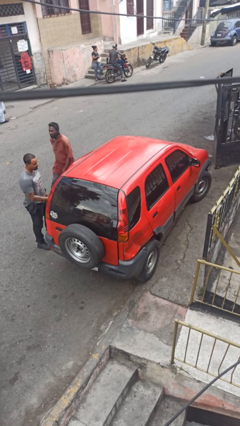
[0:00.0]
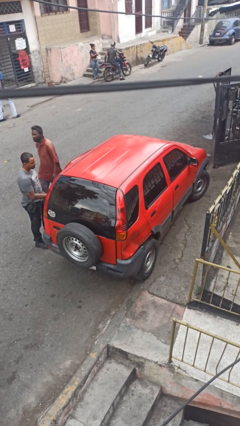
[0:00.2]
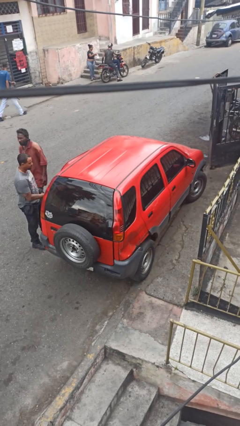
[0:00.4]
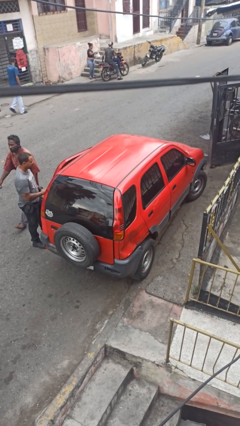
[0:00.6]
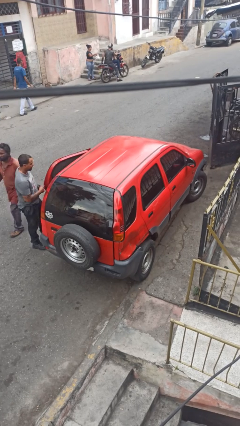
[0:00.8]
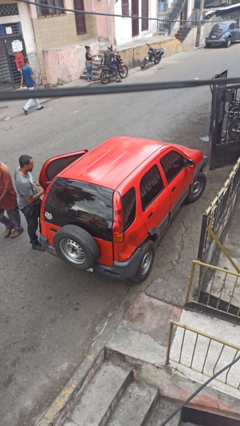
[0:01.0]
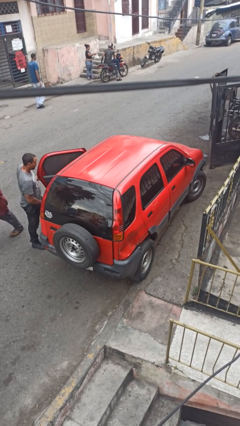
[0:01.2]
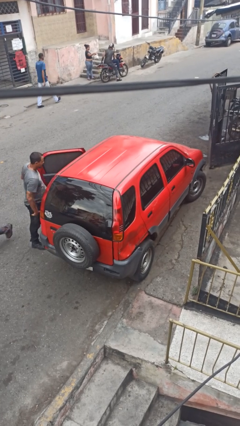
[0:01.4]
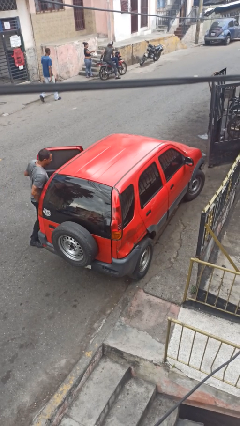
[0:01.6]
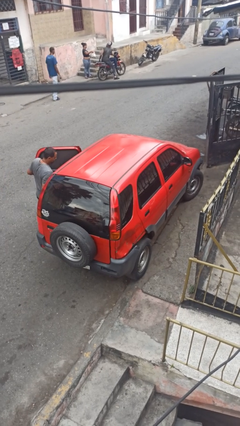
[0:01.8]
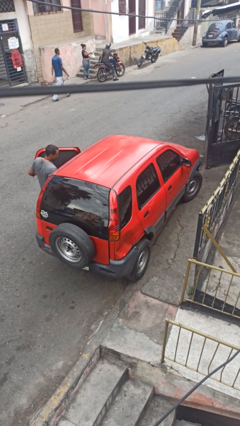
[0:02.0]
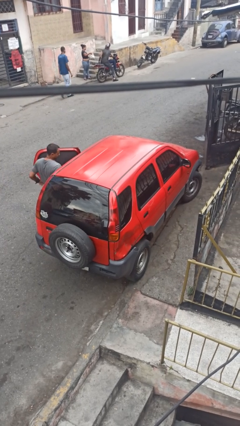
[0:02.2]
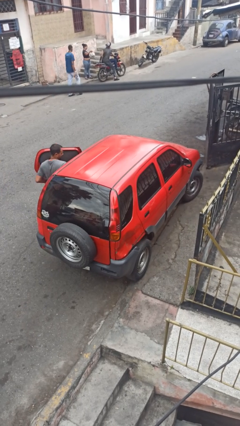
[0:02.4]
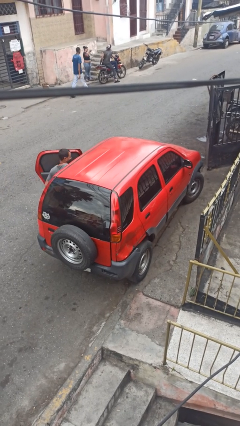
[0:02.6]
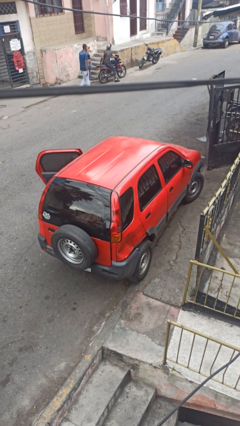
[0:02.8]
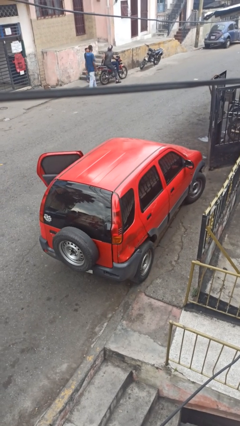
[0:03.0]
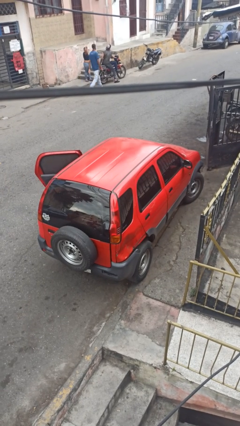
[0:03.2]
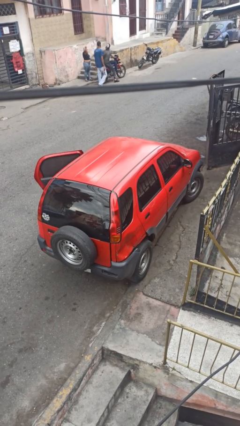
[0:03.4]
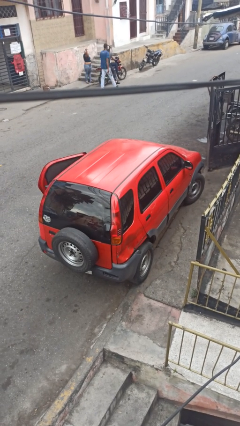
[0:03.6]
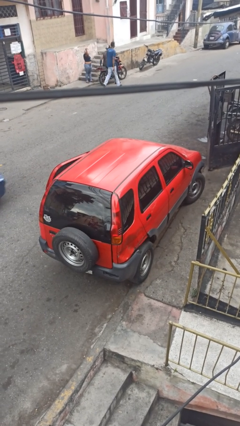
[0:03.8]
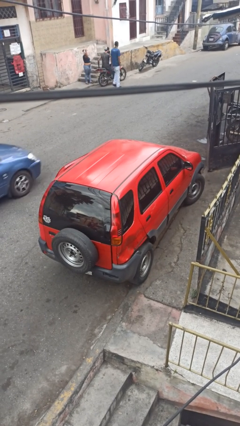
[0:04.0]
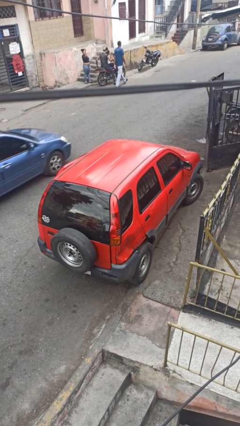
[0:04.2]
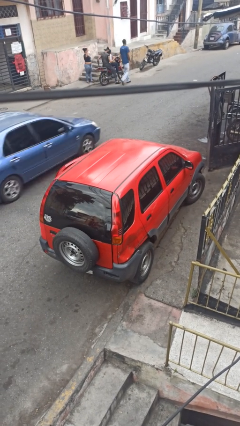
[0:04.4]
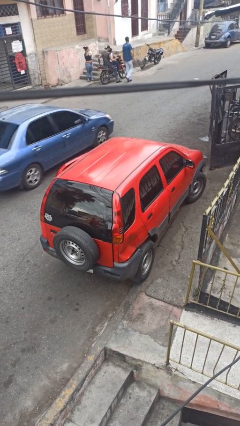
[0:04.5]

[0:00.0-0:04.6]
car picks up person

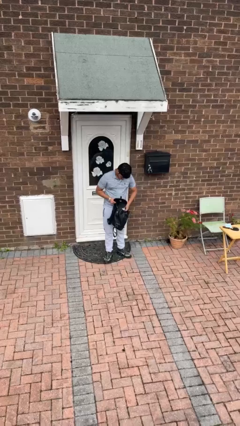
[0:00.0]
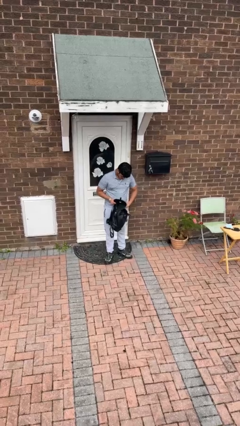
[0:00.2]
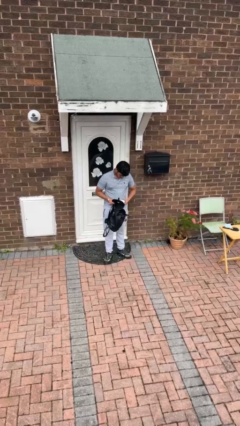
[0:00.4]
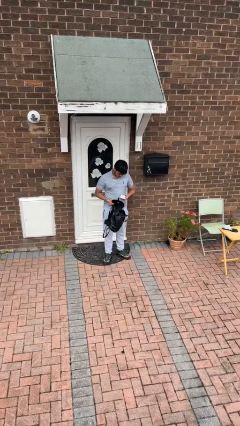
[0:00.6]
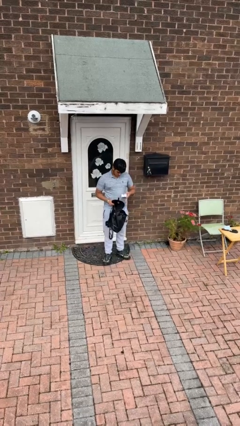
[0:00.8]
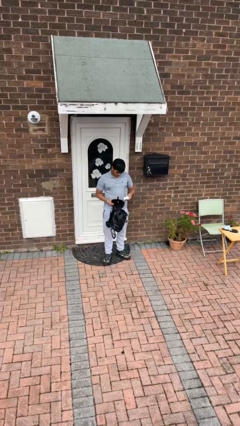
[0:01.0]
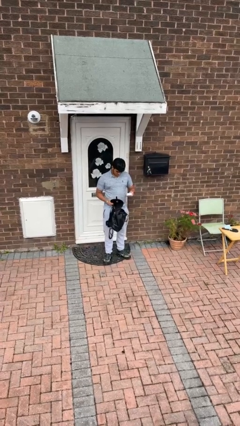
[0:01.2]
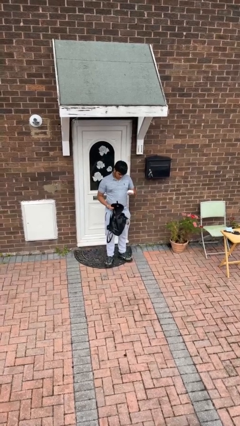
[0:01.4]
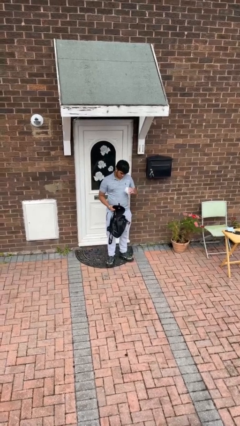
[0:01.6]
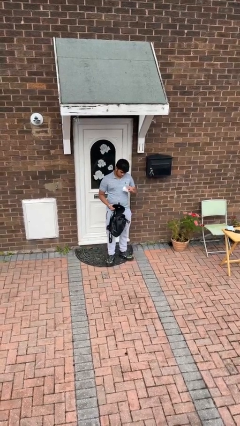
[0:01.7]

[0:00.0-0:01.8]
person takes object from backpack

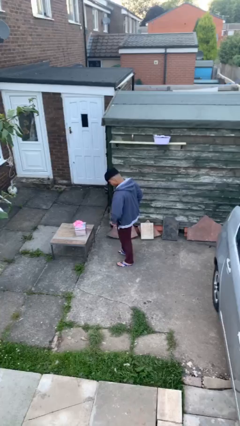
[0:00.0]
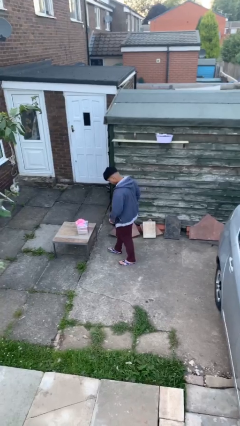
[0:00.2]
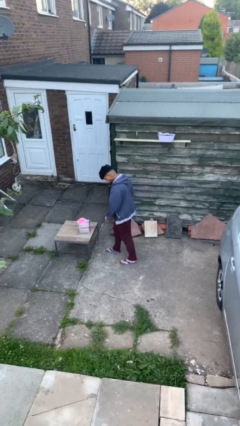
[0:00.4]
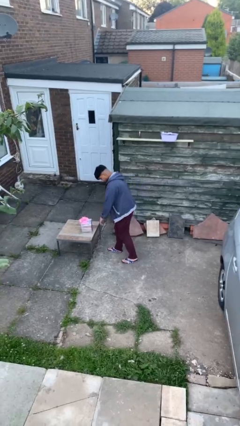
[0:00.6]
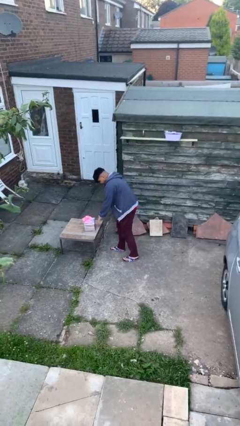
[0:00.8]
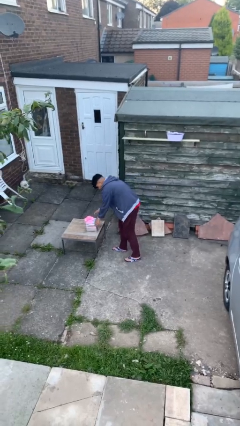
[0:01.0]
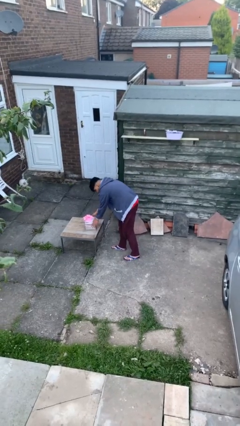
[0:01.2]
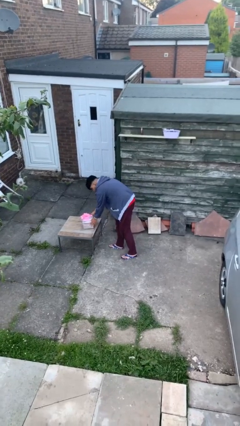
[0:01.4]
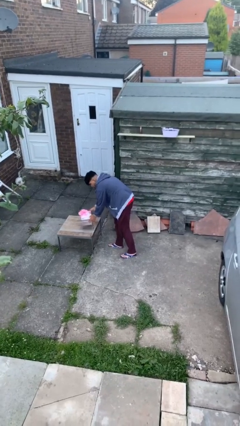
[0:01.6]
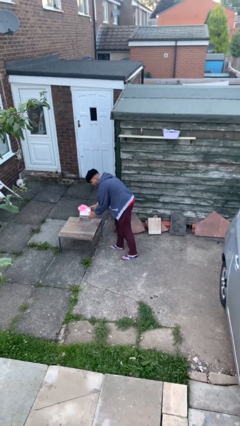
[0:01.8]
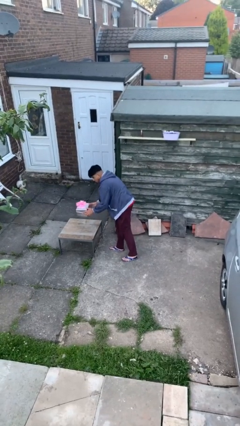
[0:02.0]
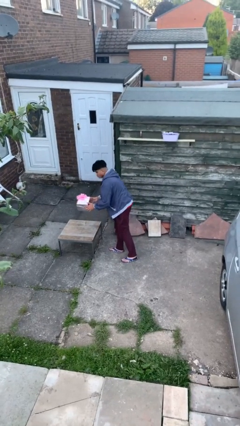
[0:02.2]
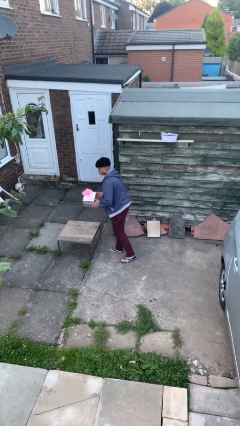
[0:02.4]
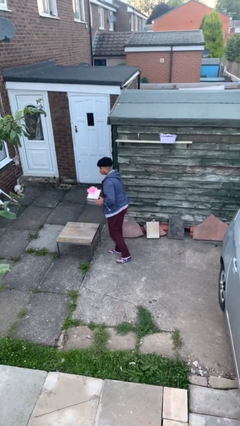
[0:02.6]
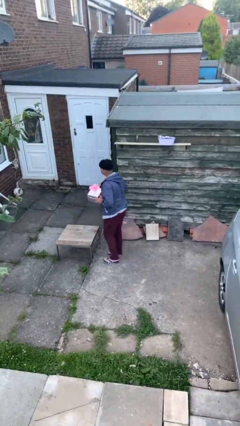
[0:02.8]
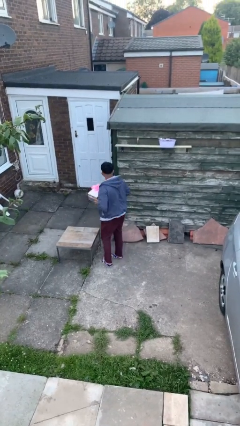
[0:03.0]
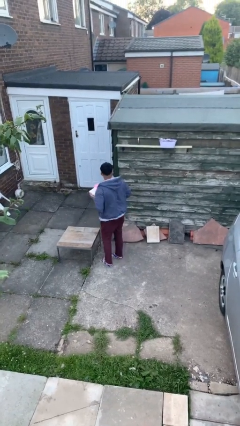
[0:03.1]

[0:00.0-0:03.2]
person picks up object from table

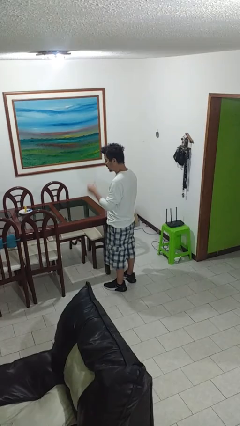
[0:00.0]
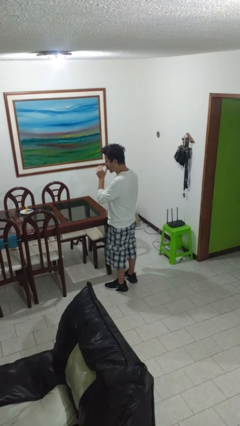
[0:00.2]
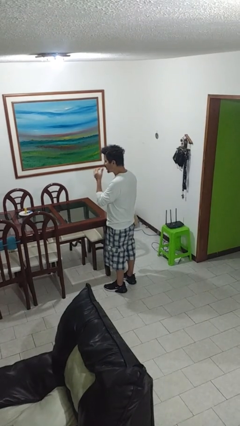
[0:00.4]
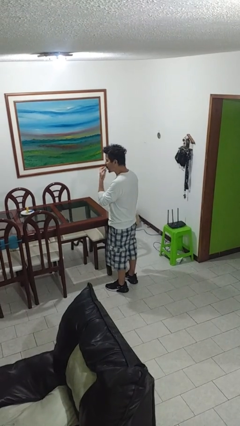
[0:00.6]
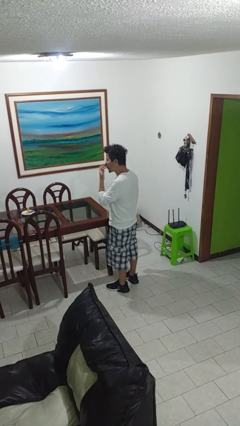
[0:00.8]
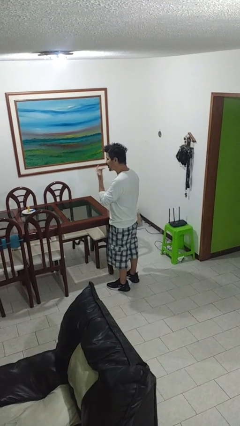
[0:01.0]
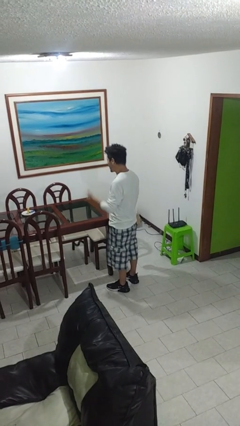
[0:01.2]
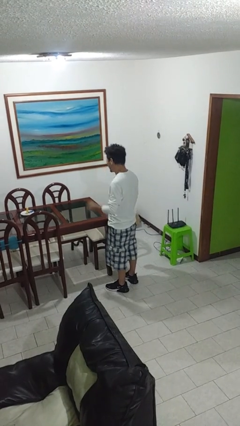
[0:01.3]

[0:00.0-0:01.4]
person licks fingers

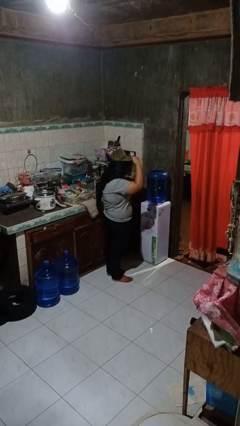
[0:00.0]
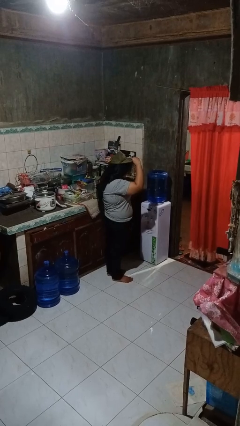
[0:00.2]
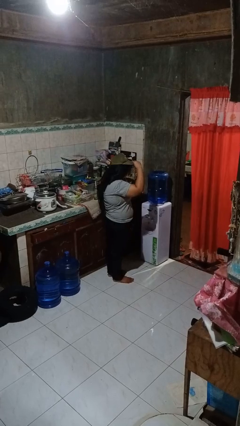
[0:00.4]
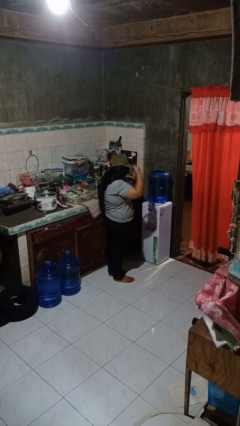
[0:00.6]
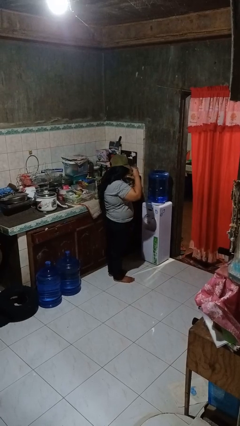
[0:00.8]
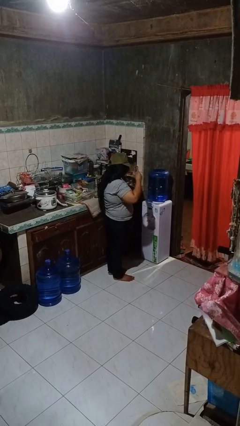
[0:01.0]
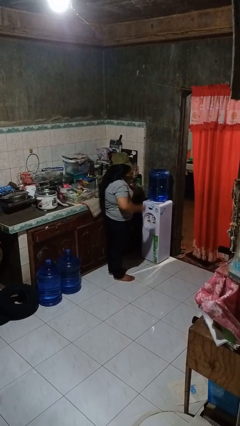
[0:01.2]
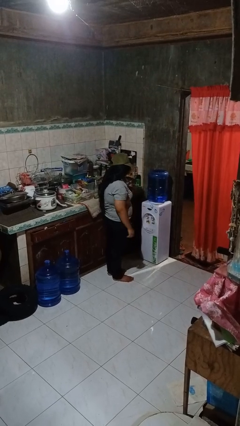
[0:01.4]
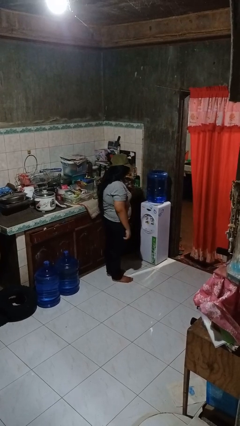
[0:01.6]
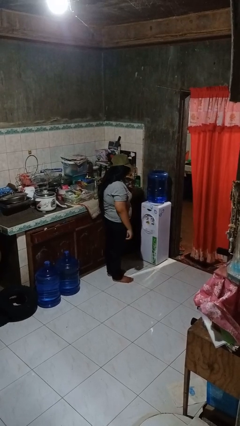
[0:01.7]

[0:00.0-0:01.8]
person puts on hat

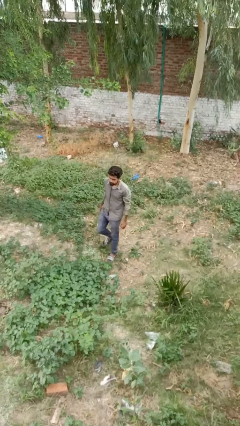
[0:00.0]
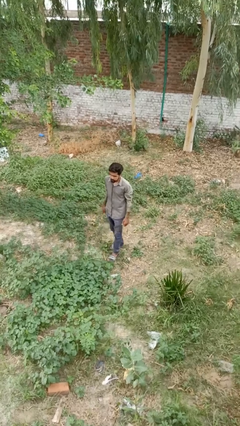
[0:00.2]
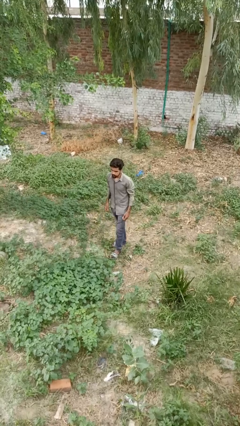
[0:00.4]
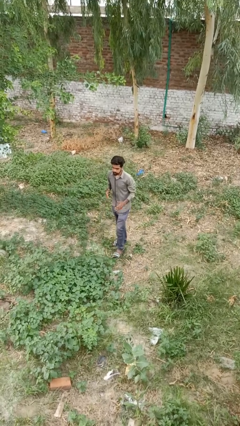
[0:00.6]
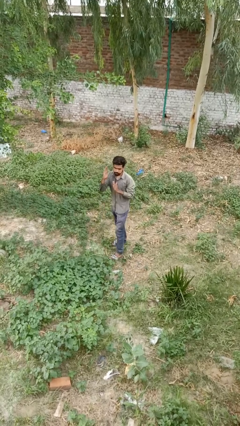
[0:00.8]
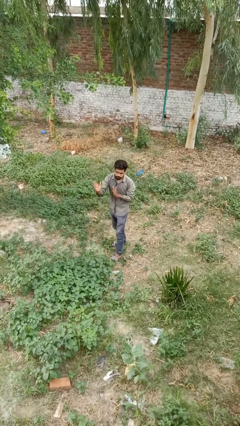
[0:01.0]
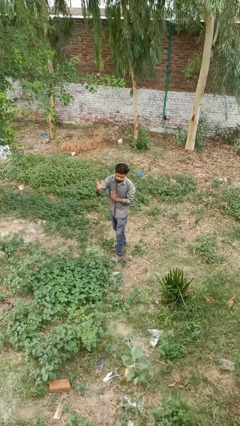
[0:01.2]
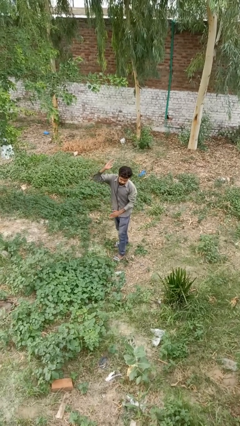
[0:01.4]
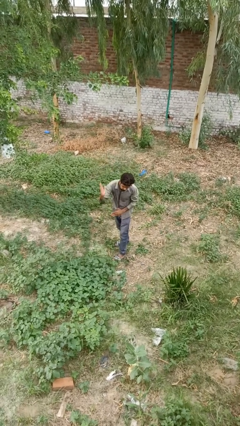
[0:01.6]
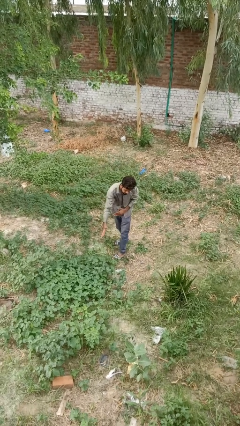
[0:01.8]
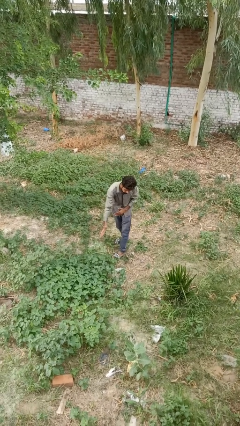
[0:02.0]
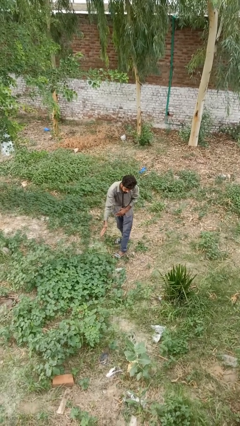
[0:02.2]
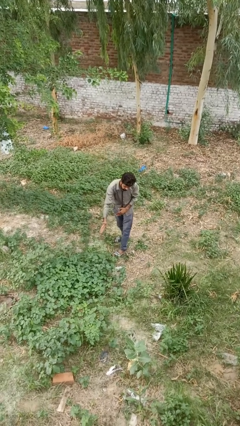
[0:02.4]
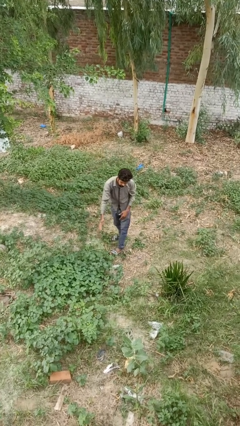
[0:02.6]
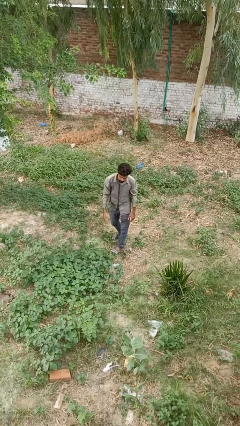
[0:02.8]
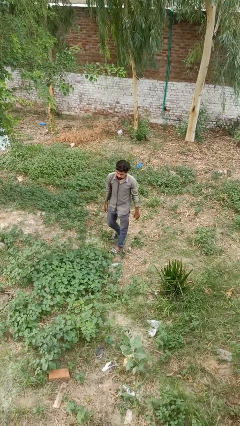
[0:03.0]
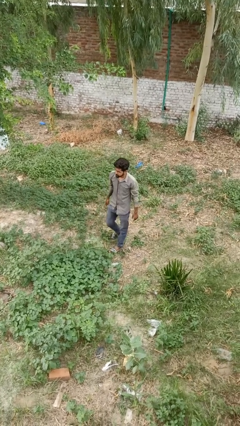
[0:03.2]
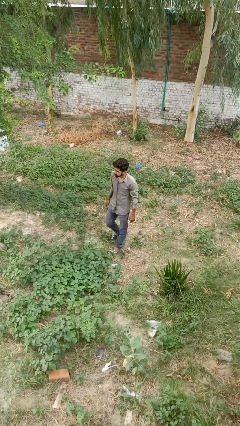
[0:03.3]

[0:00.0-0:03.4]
person karate chop

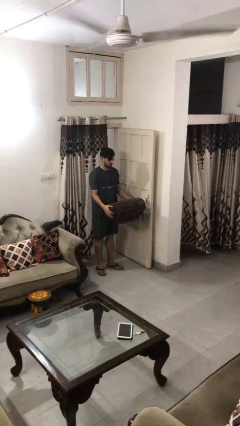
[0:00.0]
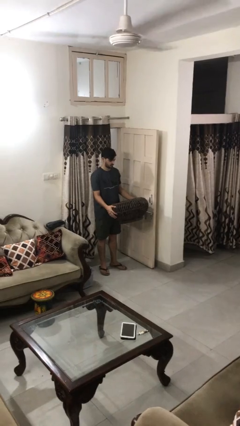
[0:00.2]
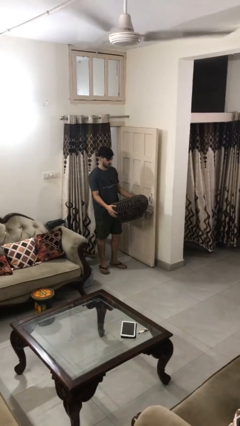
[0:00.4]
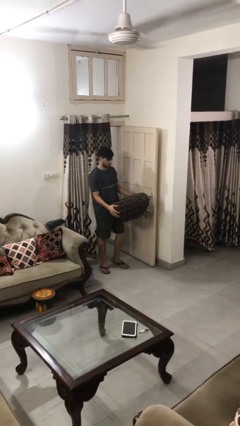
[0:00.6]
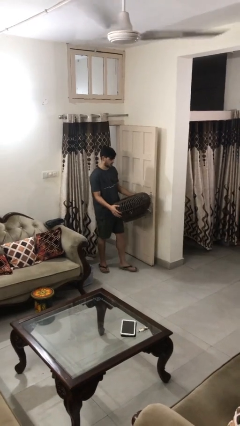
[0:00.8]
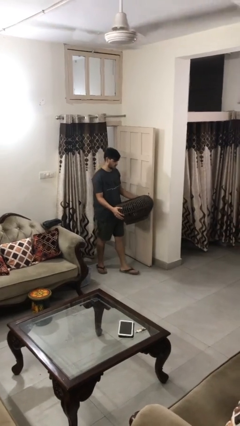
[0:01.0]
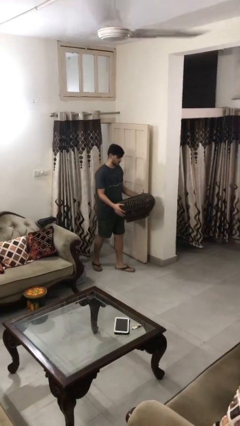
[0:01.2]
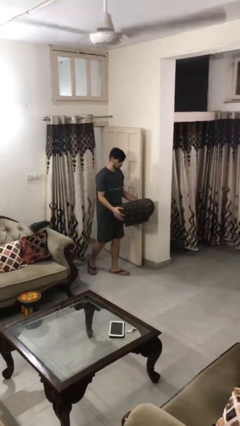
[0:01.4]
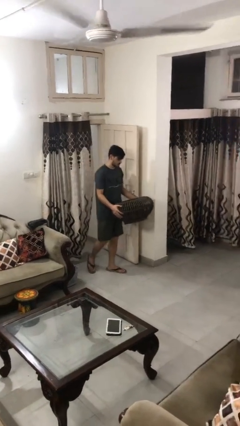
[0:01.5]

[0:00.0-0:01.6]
person carries furniture
